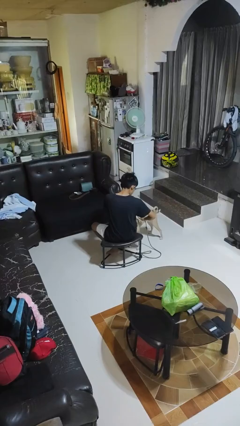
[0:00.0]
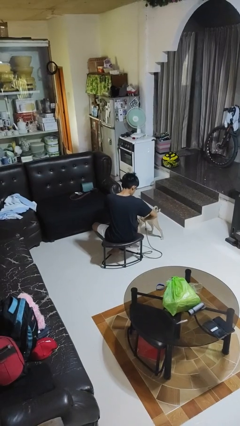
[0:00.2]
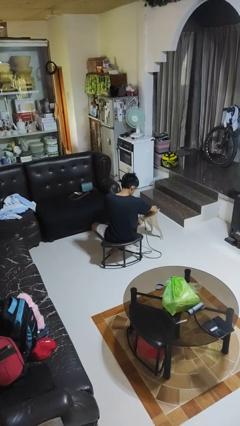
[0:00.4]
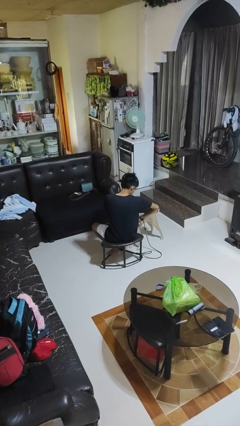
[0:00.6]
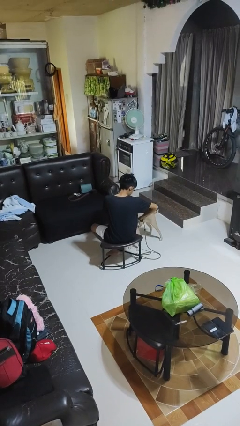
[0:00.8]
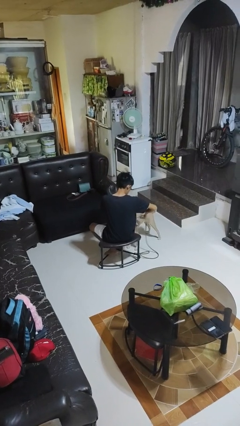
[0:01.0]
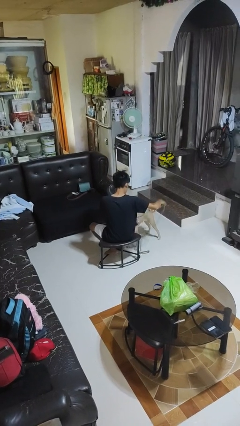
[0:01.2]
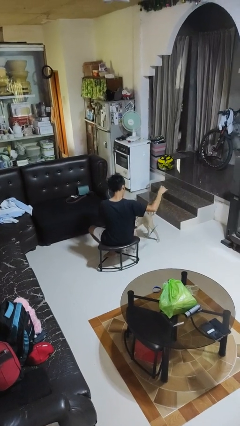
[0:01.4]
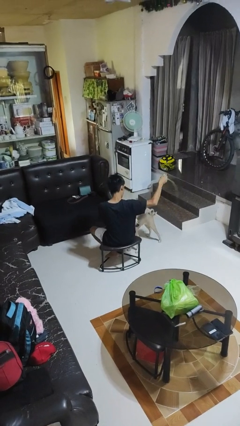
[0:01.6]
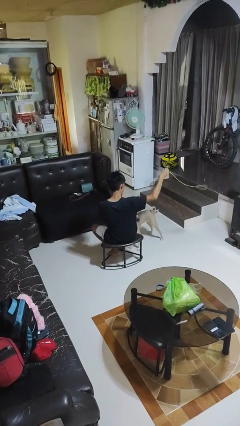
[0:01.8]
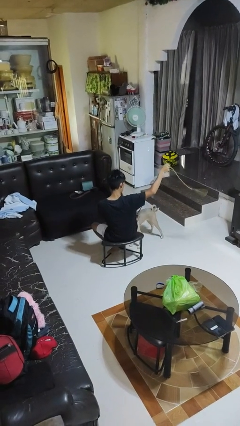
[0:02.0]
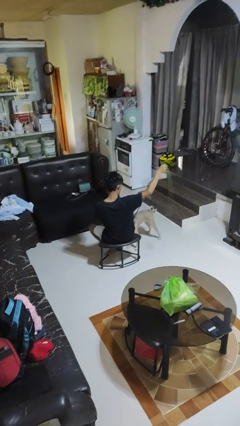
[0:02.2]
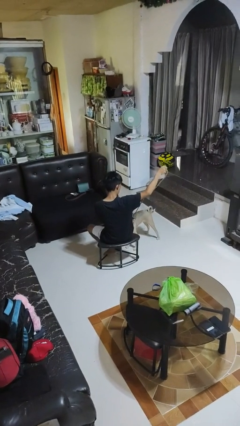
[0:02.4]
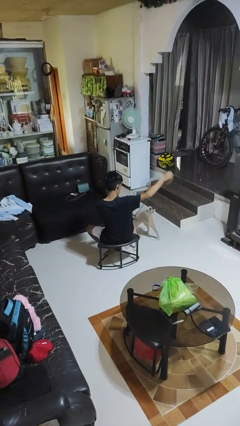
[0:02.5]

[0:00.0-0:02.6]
person attaches leash to dog

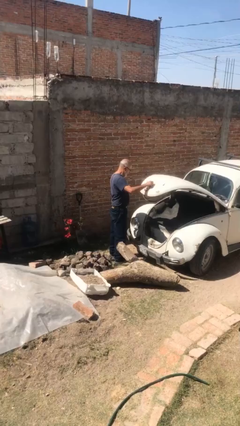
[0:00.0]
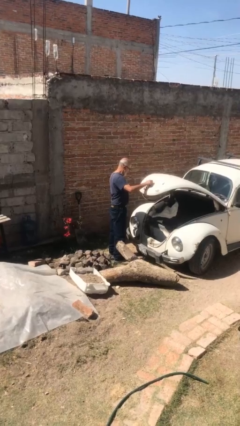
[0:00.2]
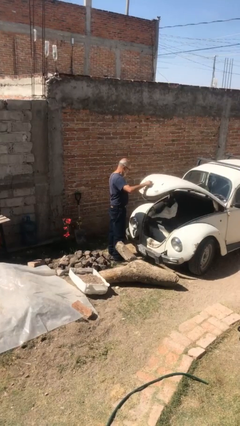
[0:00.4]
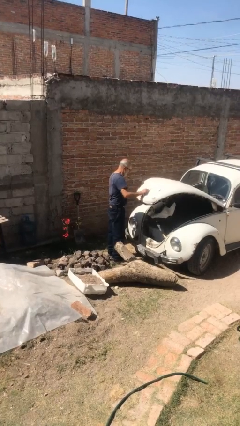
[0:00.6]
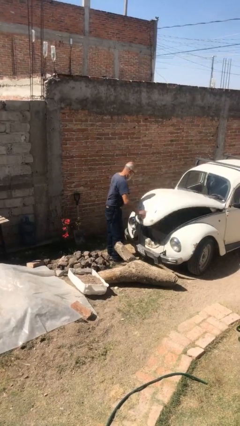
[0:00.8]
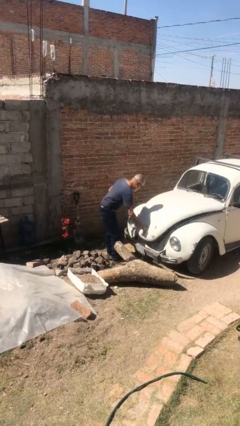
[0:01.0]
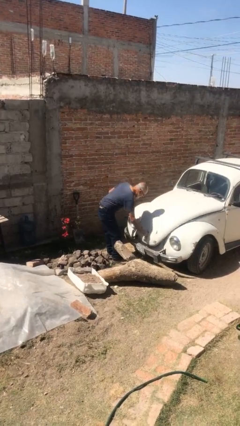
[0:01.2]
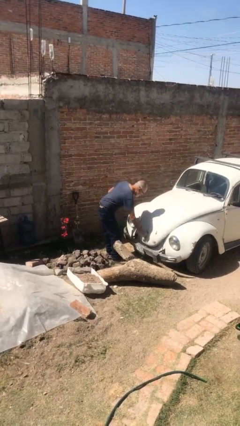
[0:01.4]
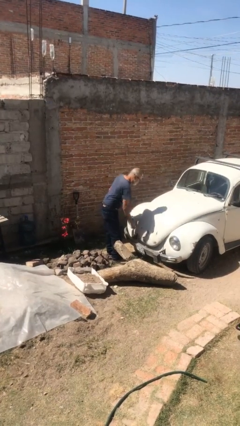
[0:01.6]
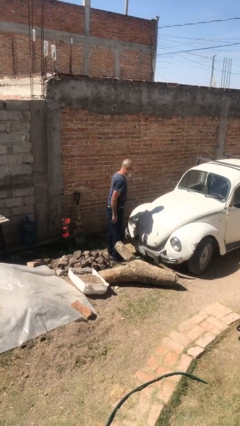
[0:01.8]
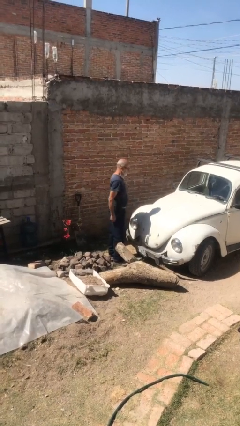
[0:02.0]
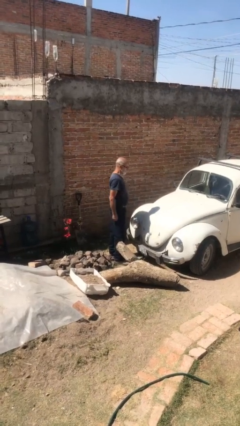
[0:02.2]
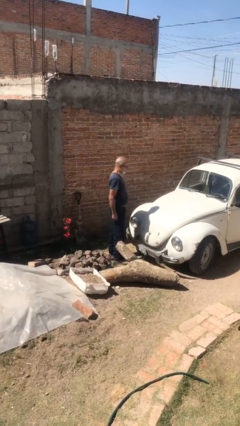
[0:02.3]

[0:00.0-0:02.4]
person closes car trunk

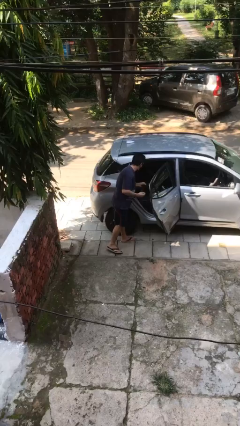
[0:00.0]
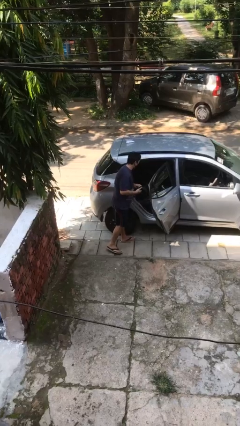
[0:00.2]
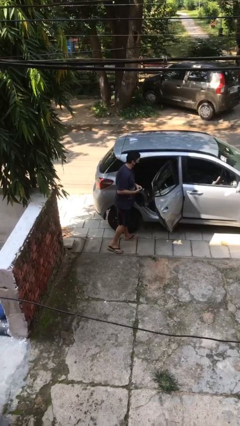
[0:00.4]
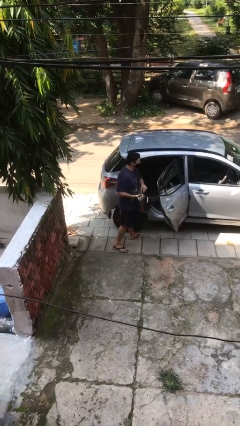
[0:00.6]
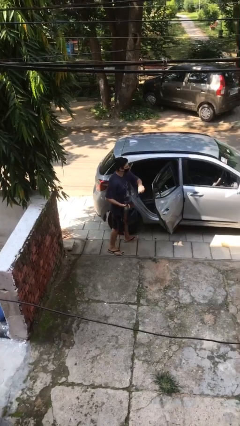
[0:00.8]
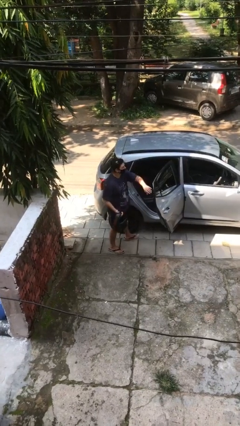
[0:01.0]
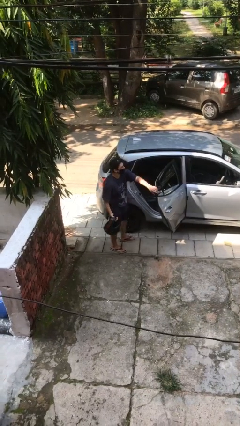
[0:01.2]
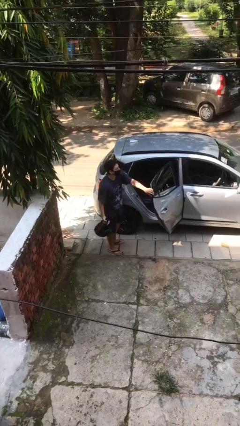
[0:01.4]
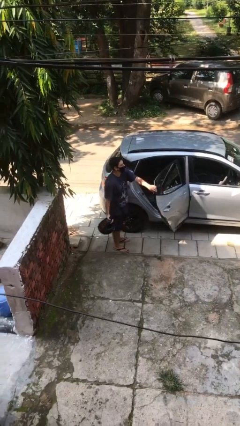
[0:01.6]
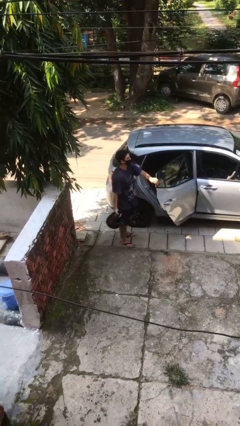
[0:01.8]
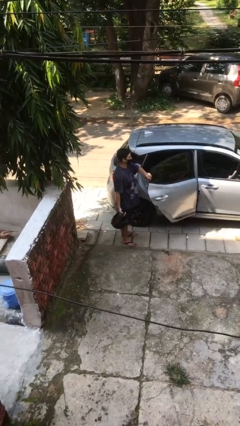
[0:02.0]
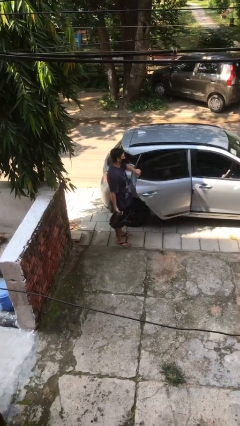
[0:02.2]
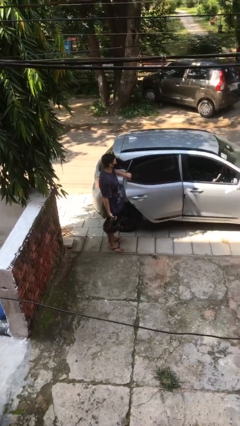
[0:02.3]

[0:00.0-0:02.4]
person unloads car

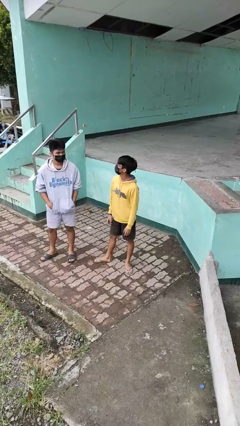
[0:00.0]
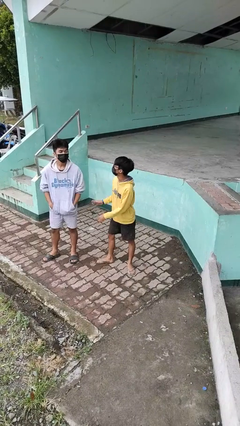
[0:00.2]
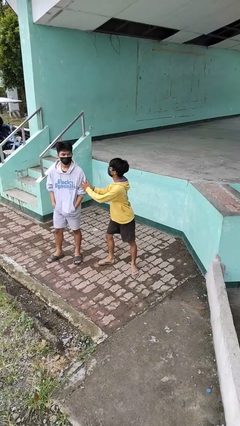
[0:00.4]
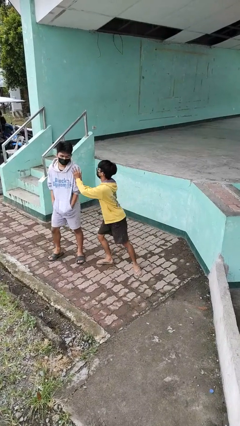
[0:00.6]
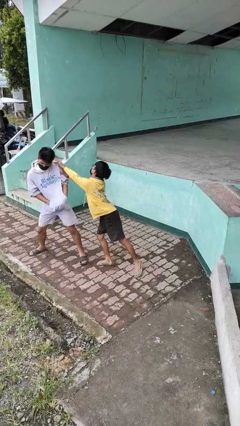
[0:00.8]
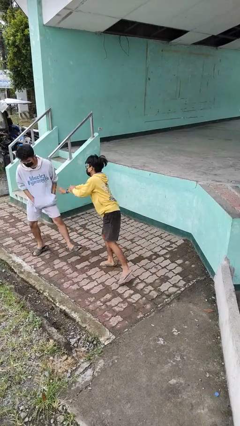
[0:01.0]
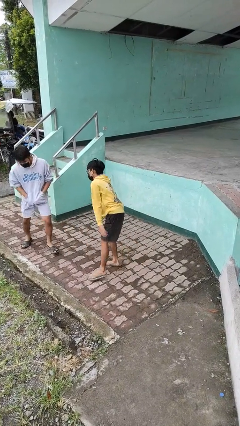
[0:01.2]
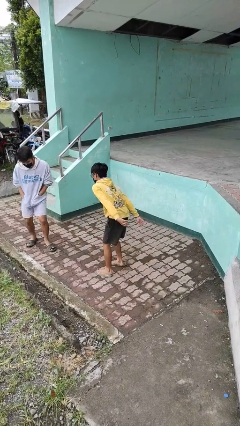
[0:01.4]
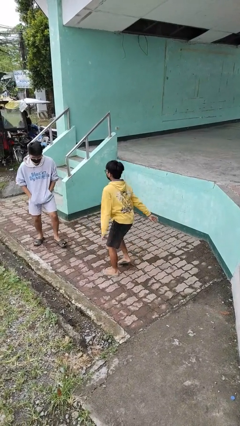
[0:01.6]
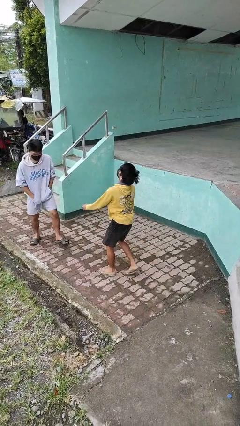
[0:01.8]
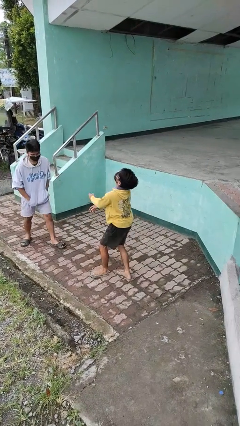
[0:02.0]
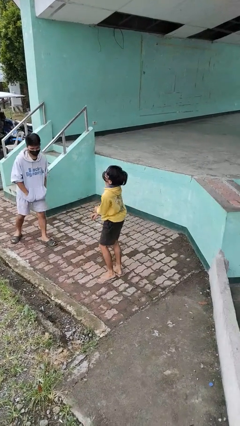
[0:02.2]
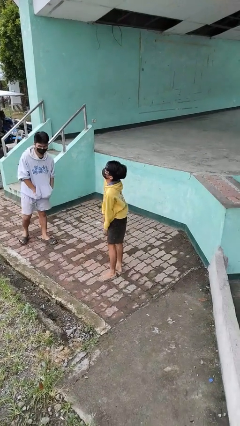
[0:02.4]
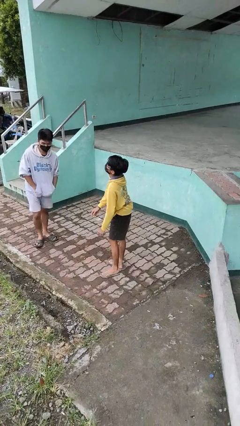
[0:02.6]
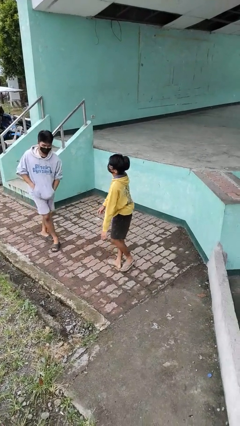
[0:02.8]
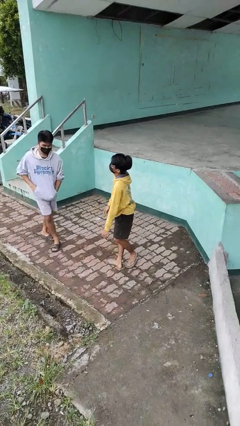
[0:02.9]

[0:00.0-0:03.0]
person shoves person

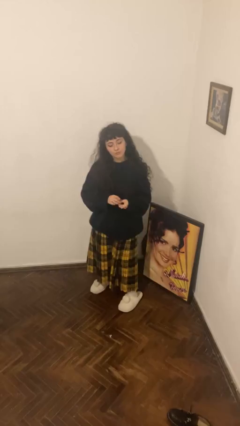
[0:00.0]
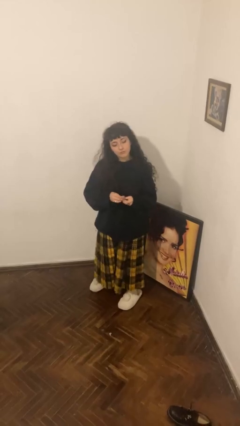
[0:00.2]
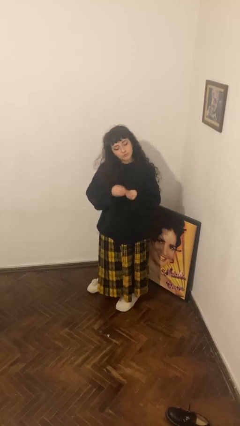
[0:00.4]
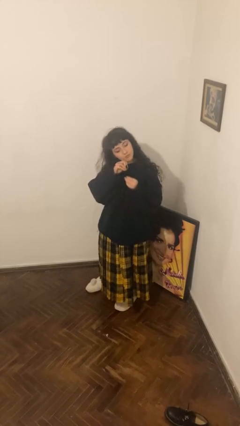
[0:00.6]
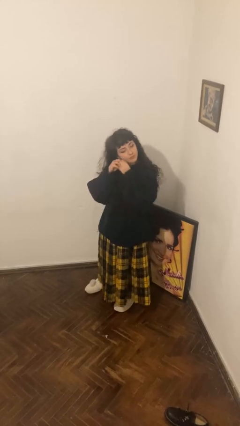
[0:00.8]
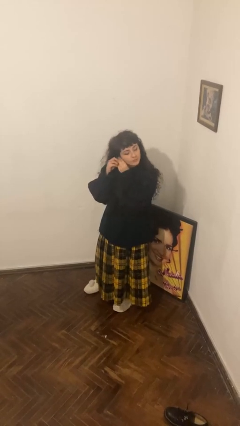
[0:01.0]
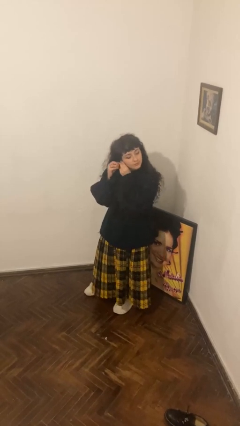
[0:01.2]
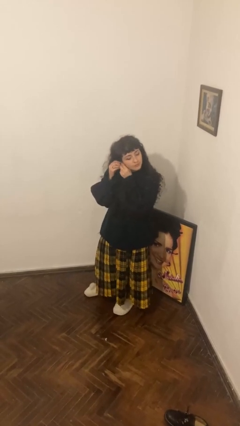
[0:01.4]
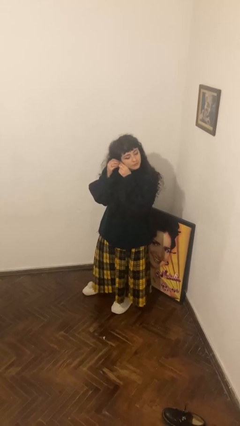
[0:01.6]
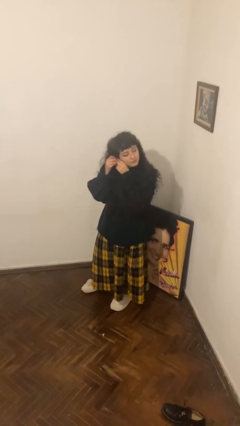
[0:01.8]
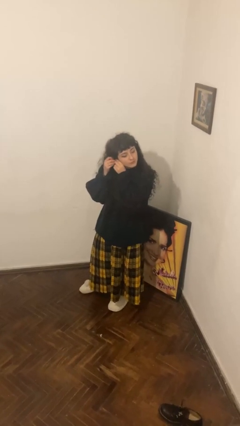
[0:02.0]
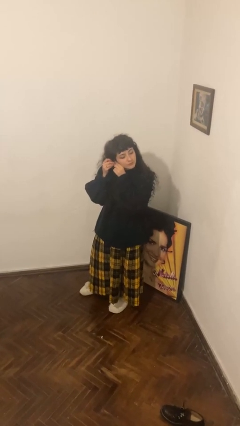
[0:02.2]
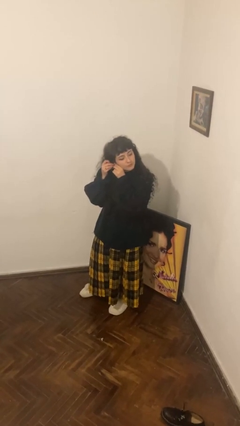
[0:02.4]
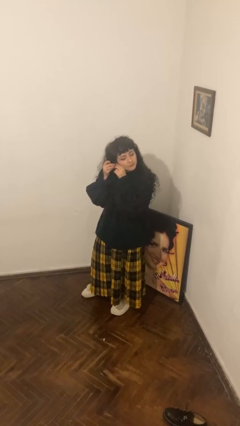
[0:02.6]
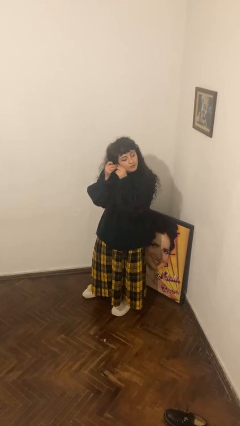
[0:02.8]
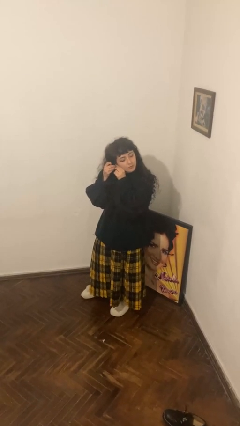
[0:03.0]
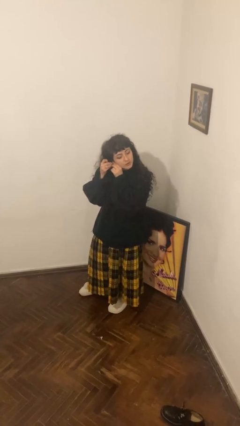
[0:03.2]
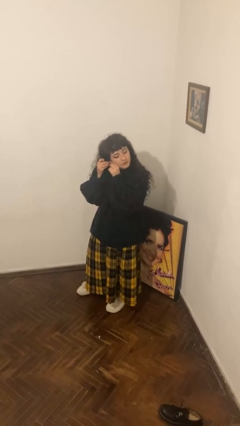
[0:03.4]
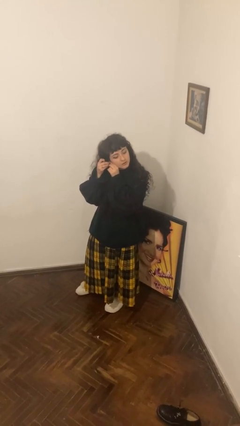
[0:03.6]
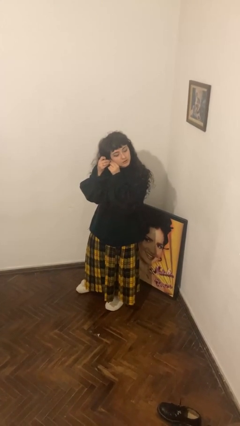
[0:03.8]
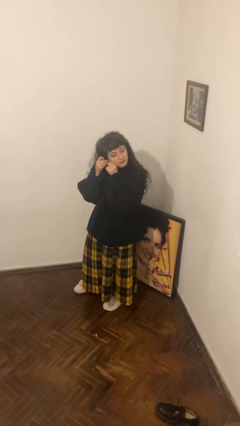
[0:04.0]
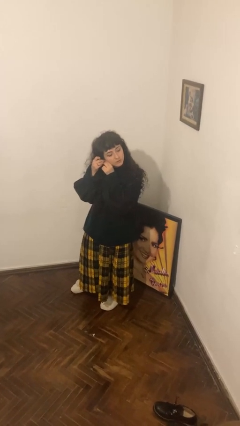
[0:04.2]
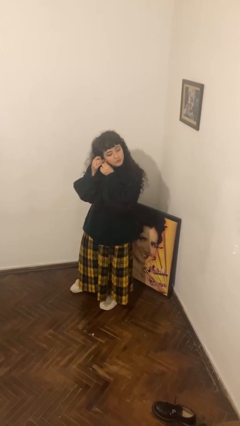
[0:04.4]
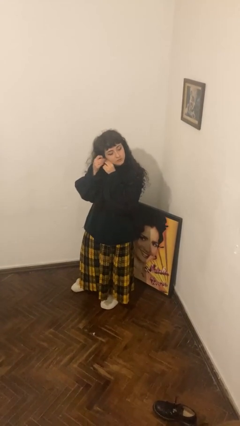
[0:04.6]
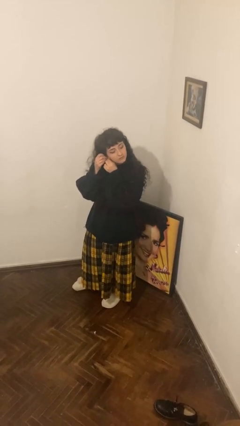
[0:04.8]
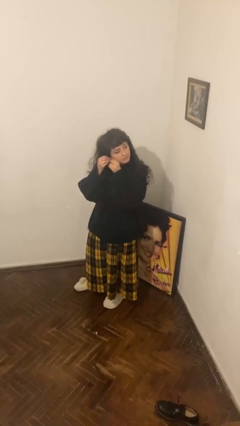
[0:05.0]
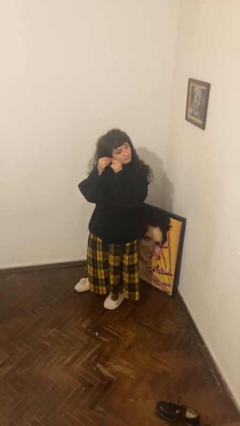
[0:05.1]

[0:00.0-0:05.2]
person puts on earrings

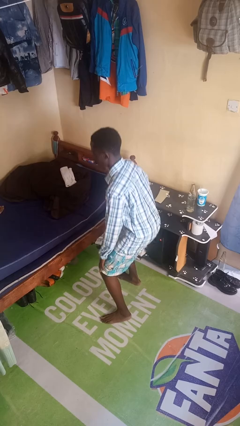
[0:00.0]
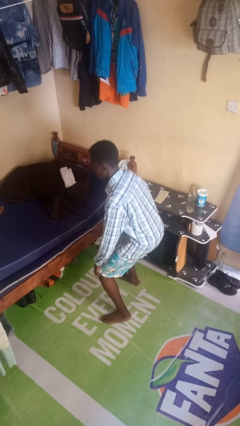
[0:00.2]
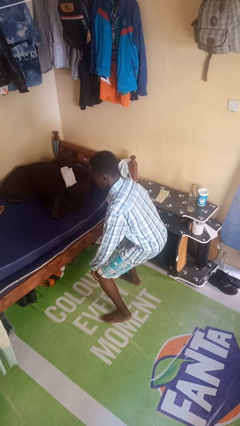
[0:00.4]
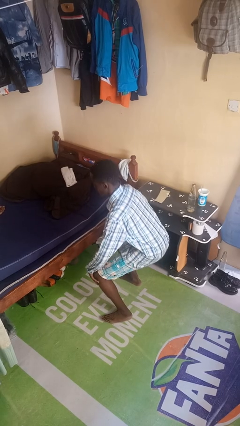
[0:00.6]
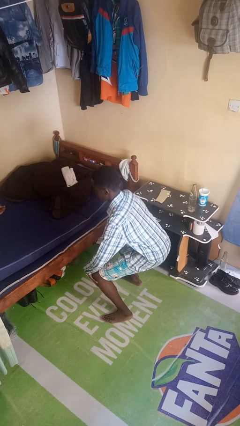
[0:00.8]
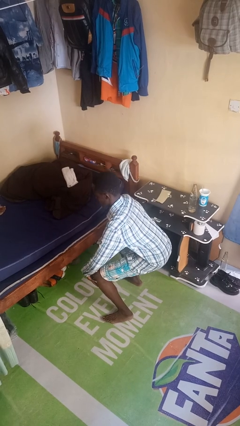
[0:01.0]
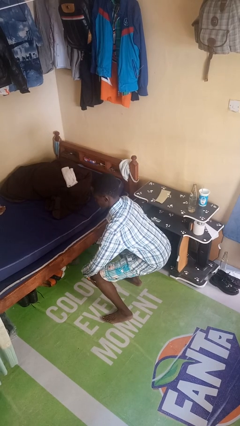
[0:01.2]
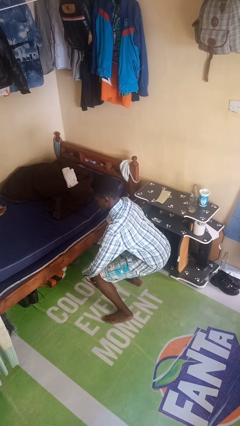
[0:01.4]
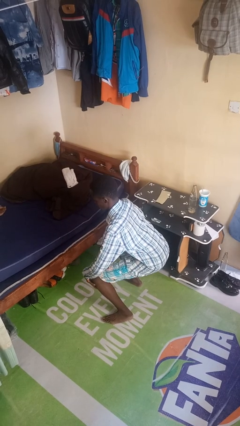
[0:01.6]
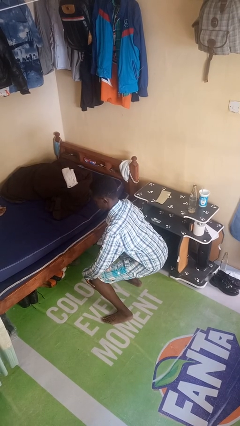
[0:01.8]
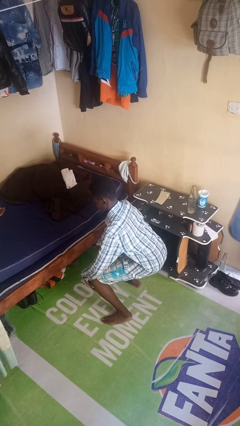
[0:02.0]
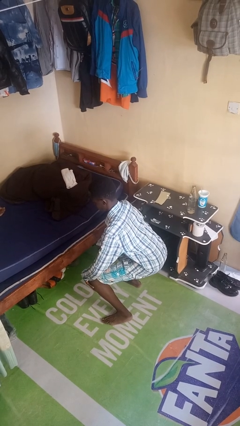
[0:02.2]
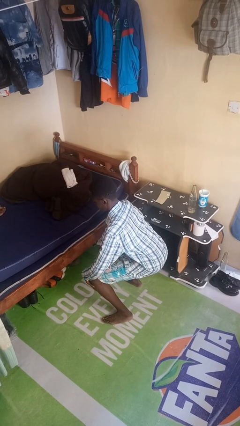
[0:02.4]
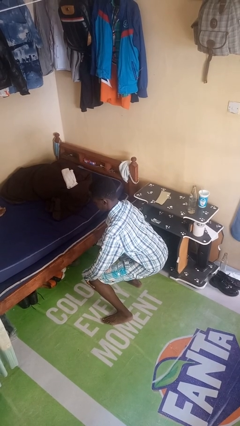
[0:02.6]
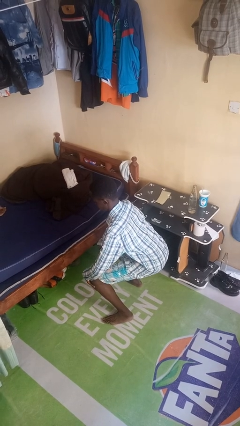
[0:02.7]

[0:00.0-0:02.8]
person squats
